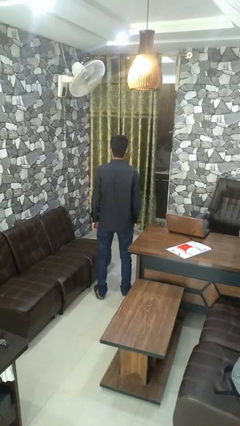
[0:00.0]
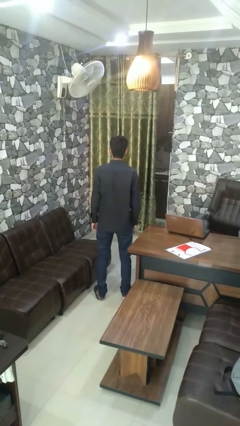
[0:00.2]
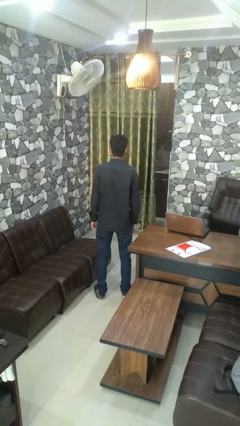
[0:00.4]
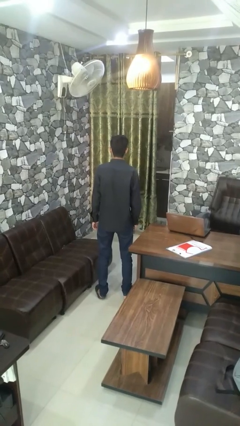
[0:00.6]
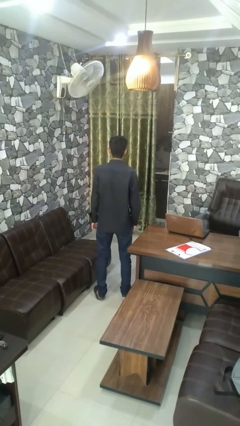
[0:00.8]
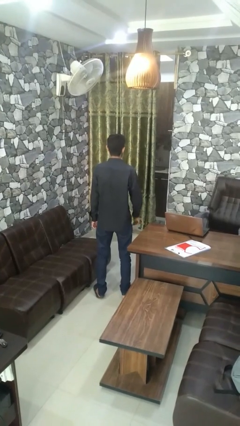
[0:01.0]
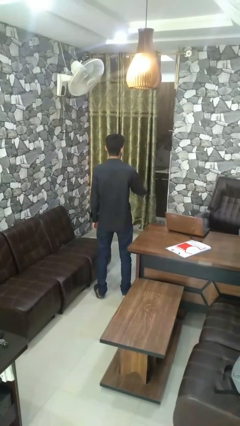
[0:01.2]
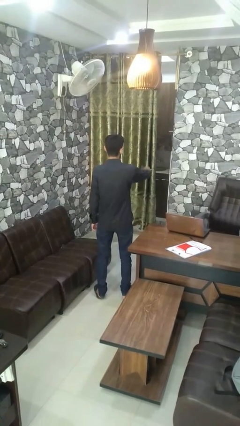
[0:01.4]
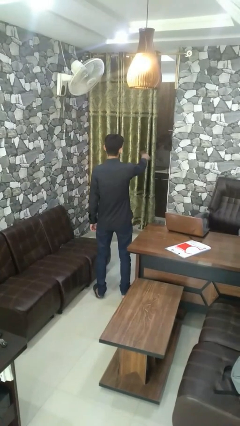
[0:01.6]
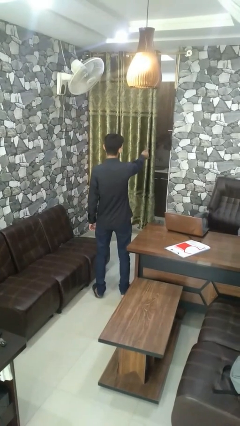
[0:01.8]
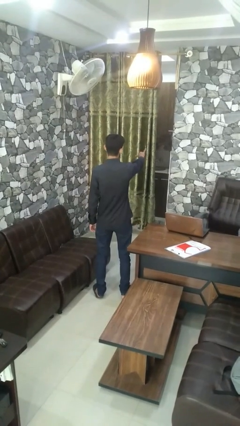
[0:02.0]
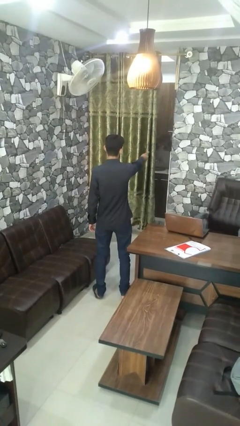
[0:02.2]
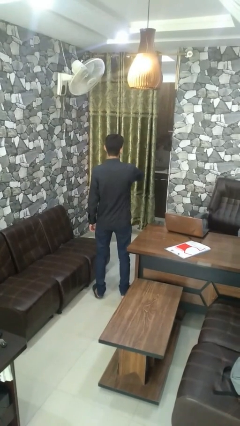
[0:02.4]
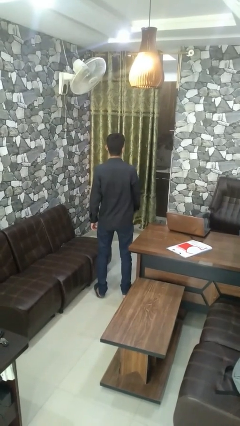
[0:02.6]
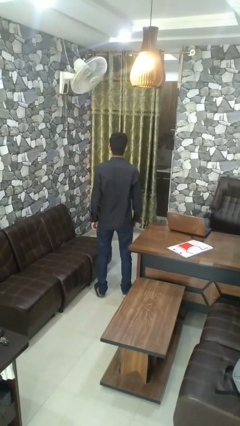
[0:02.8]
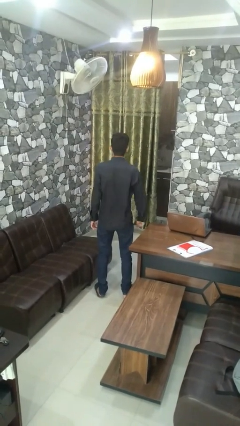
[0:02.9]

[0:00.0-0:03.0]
person gestures hang loose

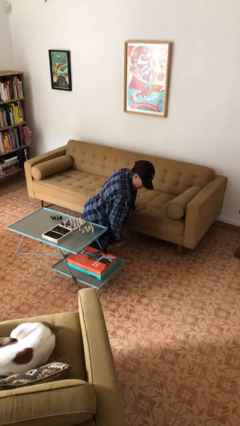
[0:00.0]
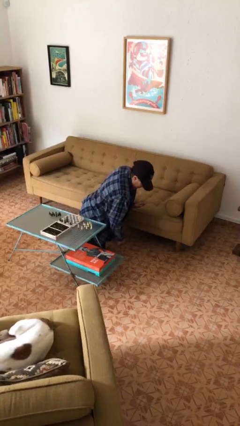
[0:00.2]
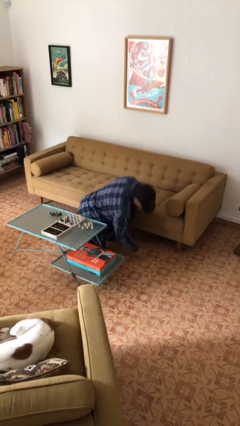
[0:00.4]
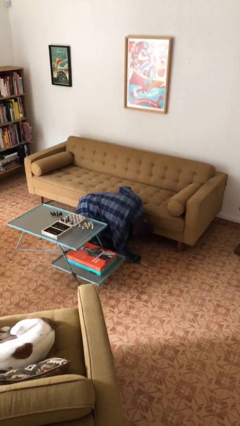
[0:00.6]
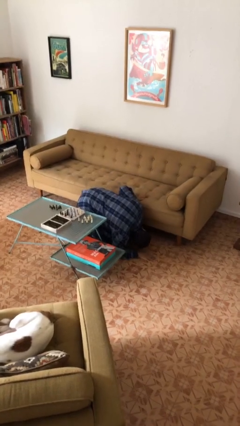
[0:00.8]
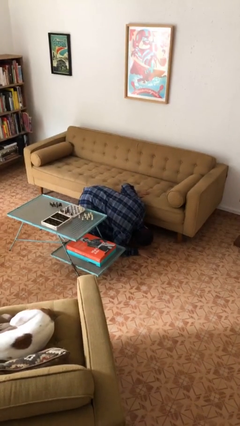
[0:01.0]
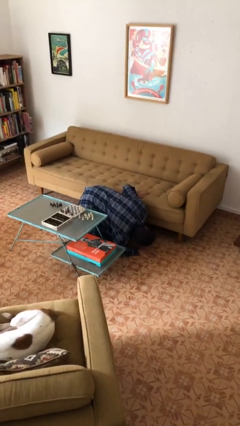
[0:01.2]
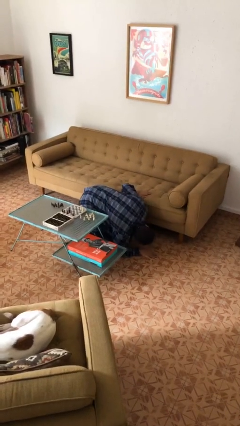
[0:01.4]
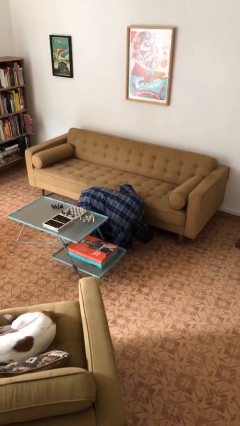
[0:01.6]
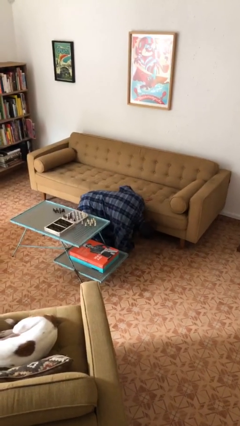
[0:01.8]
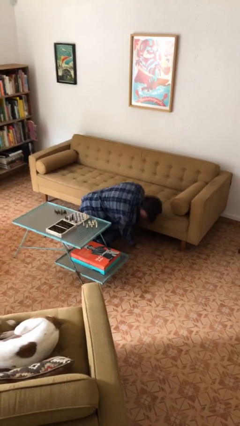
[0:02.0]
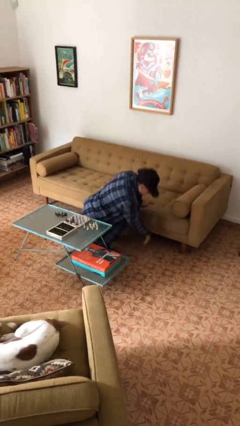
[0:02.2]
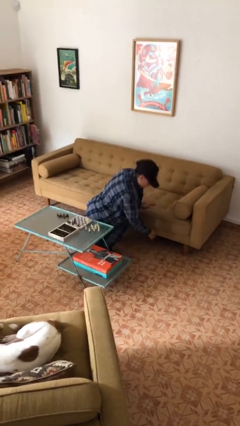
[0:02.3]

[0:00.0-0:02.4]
person searches under couch

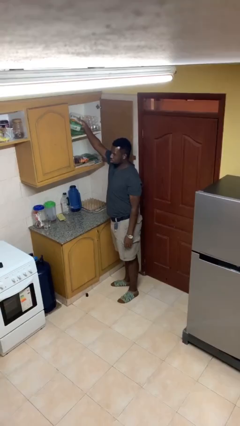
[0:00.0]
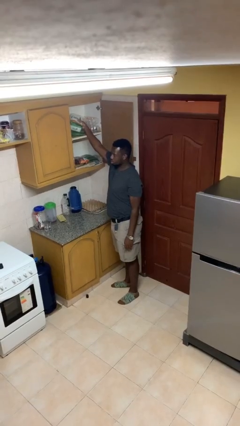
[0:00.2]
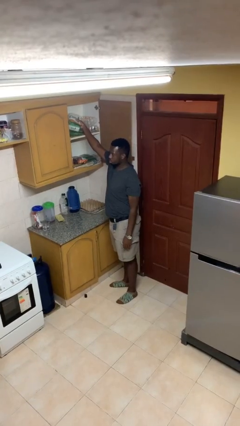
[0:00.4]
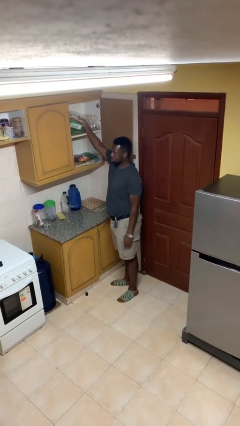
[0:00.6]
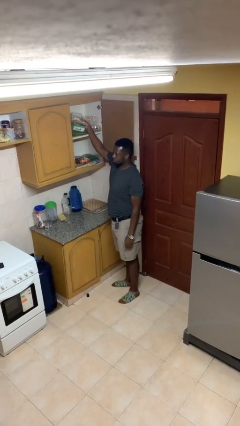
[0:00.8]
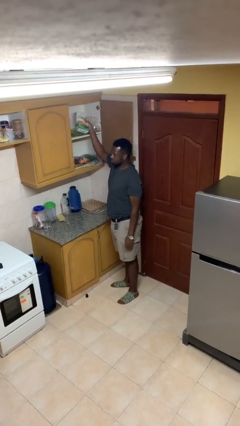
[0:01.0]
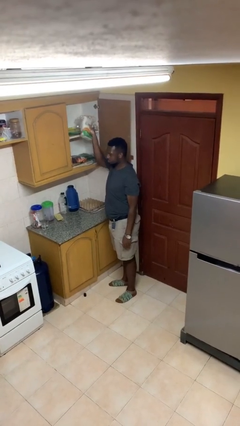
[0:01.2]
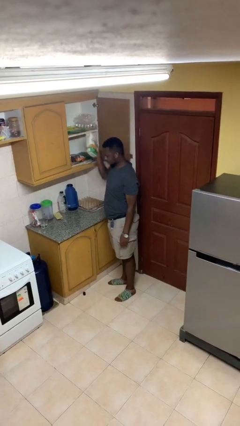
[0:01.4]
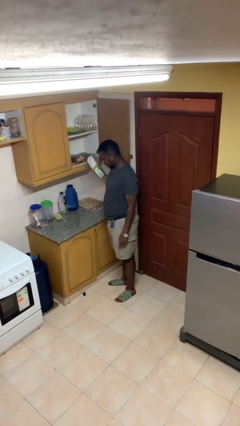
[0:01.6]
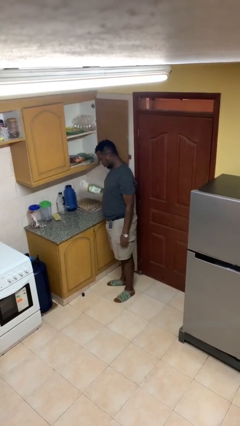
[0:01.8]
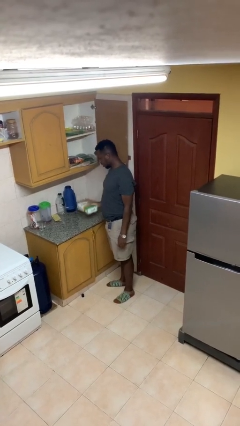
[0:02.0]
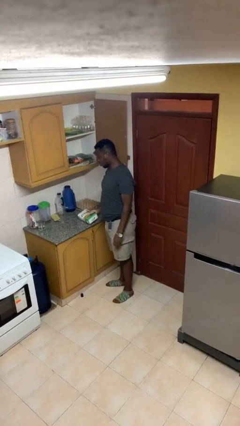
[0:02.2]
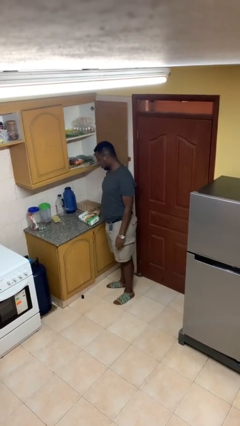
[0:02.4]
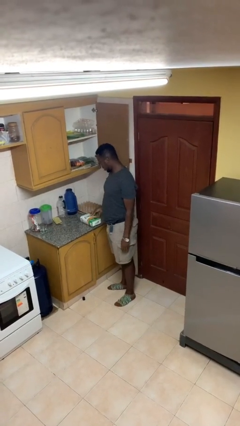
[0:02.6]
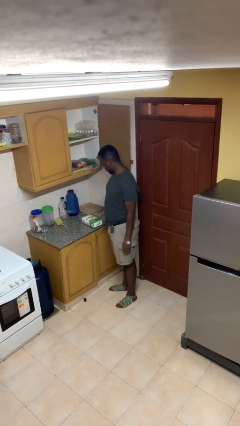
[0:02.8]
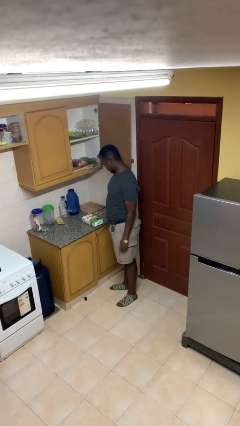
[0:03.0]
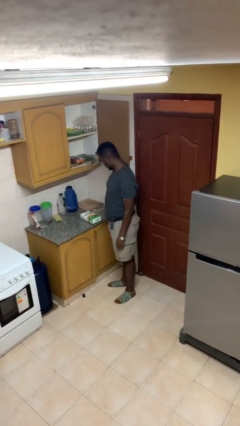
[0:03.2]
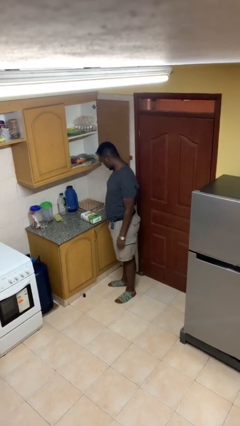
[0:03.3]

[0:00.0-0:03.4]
person puts down object on table

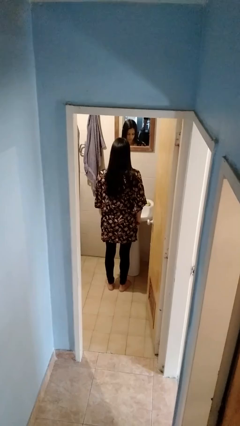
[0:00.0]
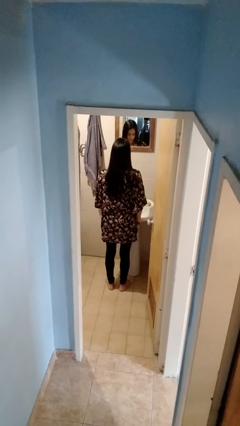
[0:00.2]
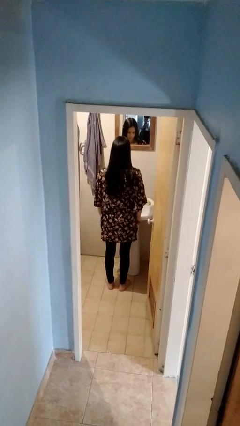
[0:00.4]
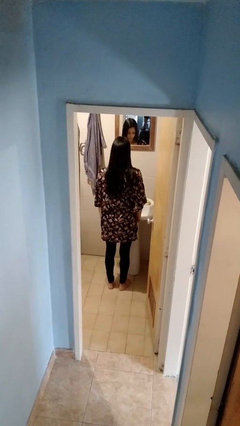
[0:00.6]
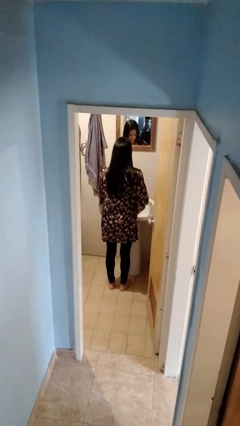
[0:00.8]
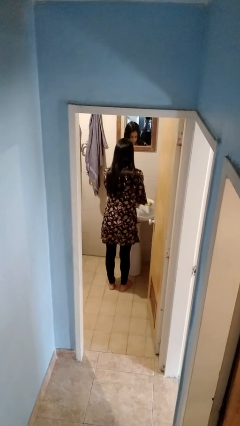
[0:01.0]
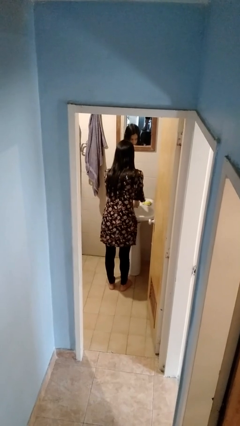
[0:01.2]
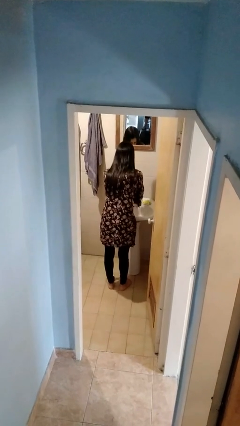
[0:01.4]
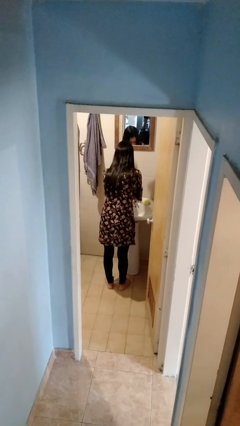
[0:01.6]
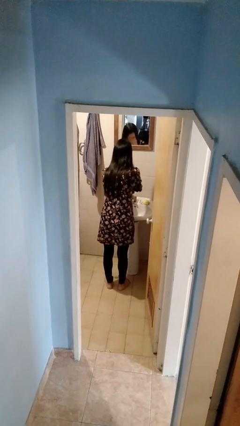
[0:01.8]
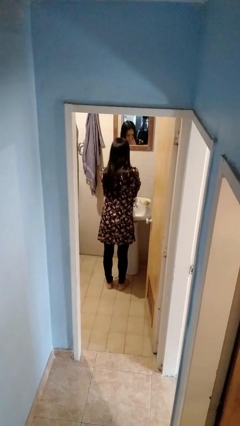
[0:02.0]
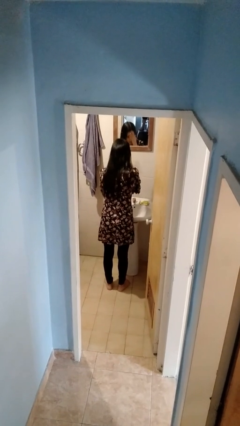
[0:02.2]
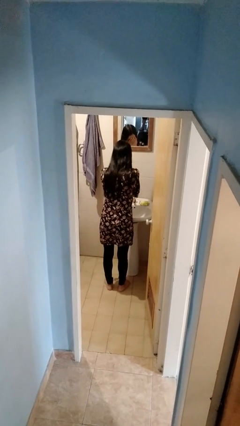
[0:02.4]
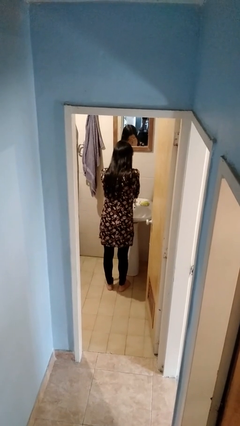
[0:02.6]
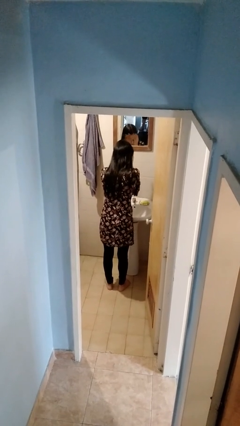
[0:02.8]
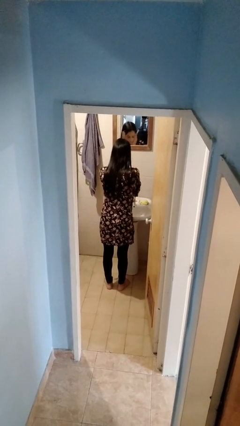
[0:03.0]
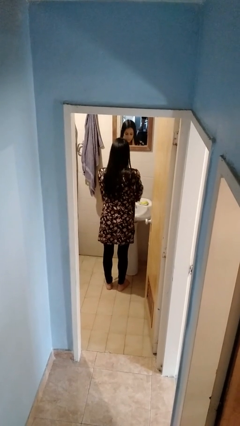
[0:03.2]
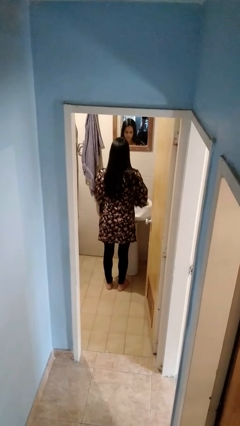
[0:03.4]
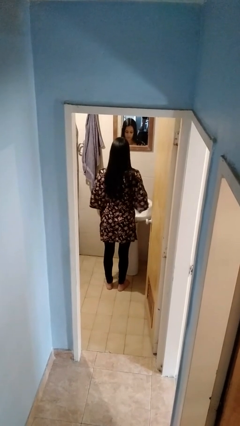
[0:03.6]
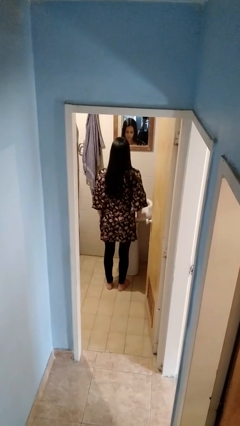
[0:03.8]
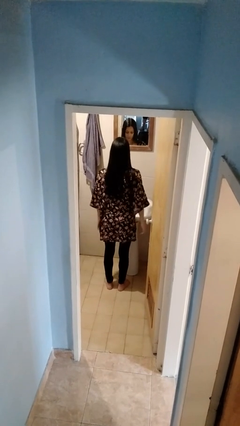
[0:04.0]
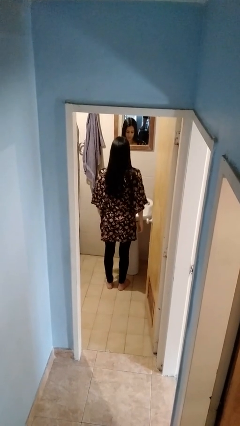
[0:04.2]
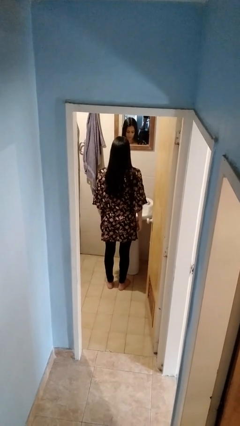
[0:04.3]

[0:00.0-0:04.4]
person washes face

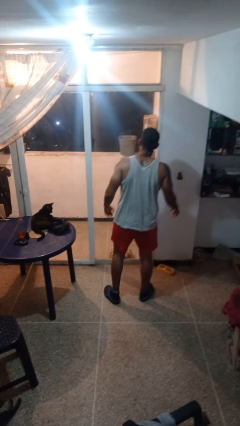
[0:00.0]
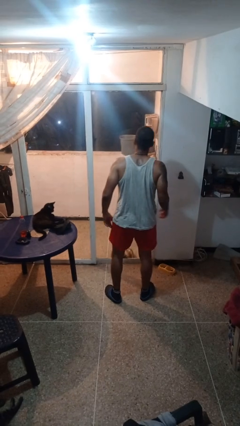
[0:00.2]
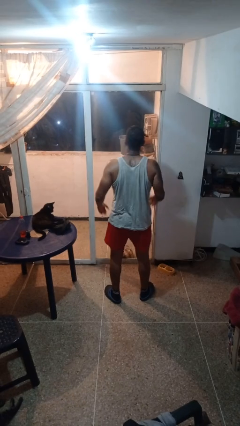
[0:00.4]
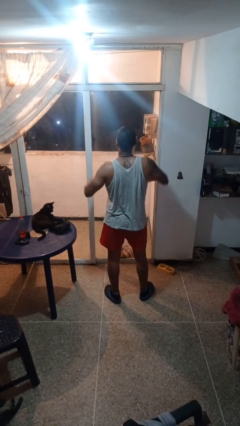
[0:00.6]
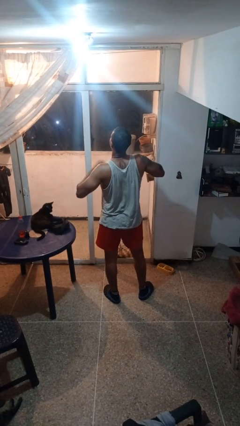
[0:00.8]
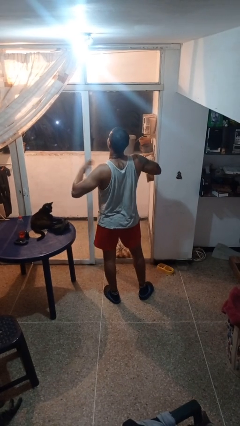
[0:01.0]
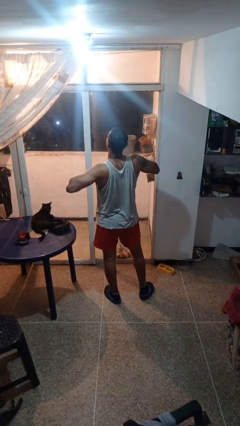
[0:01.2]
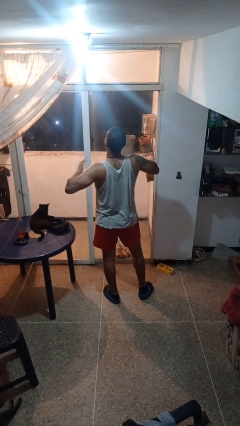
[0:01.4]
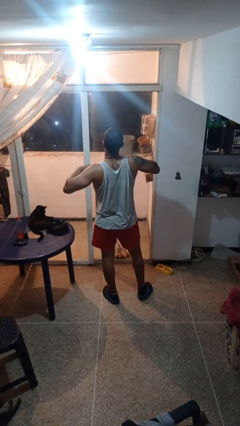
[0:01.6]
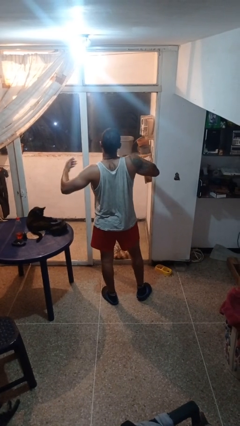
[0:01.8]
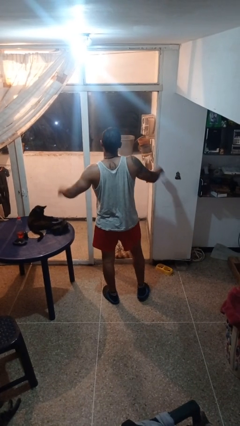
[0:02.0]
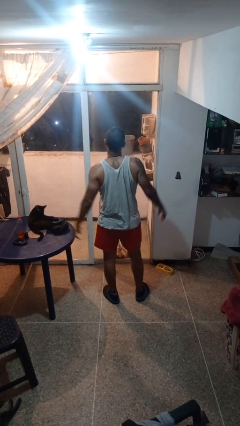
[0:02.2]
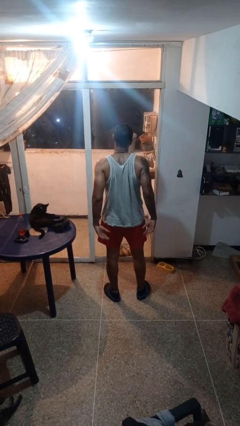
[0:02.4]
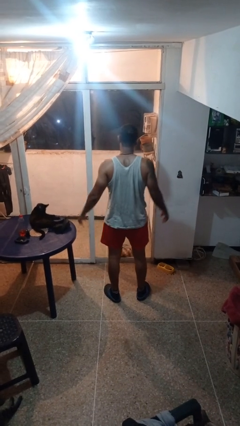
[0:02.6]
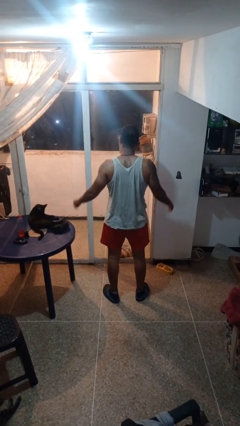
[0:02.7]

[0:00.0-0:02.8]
person drums on chest

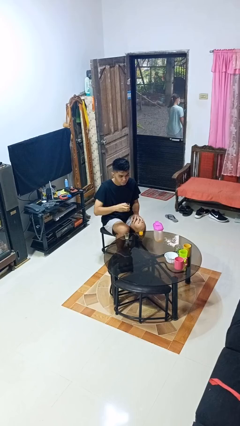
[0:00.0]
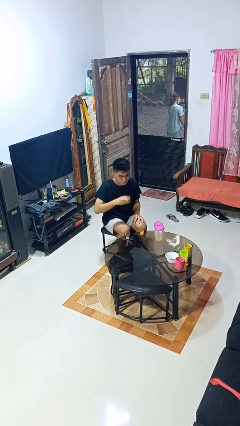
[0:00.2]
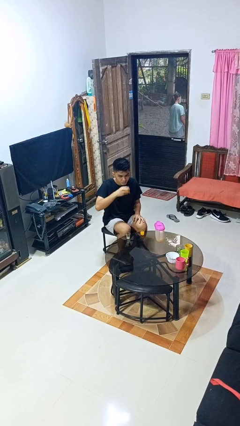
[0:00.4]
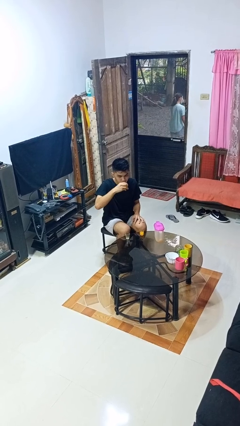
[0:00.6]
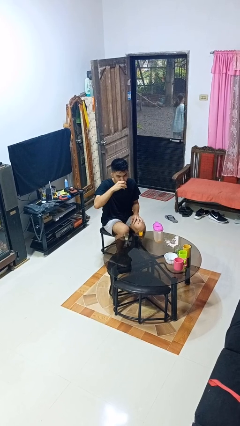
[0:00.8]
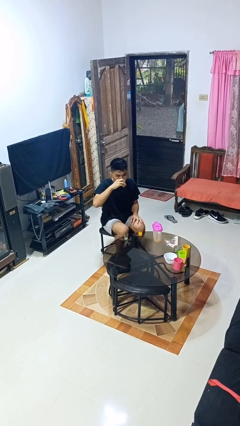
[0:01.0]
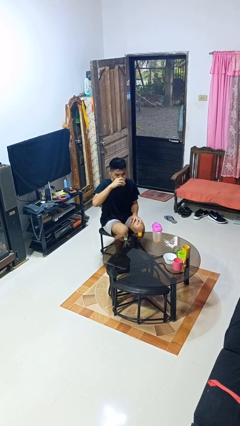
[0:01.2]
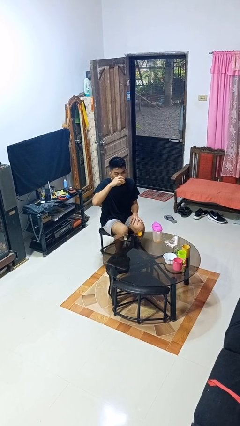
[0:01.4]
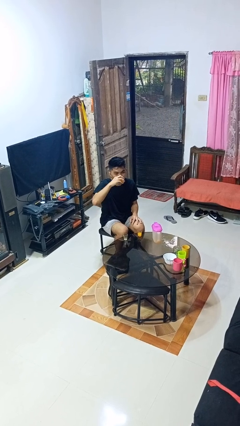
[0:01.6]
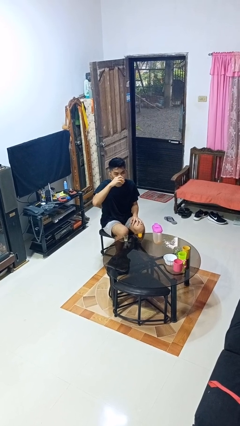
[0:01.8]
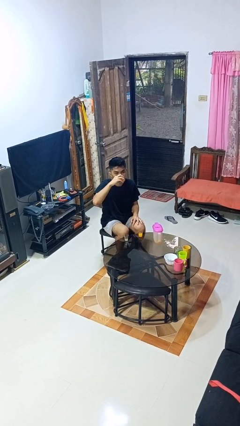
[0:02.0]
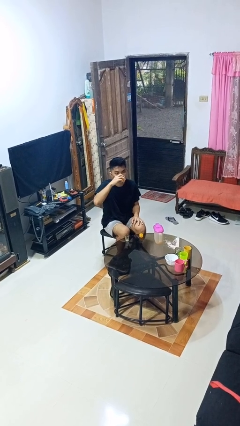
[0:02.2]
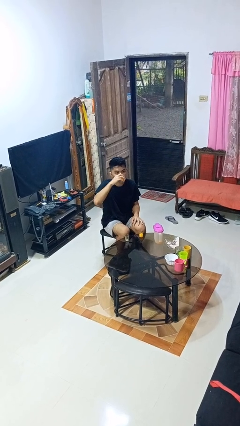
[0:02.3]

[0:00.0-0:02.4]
person drinks from shotglass
